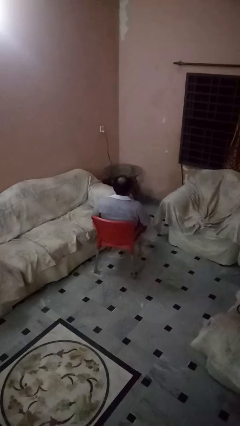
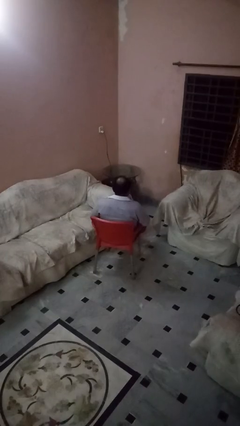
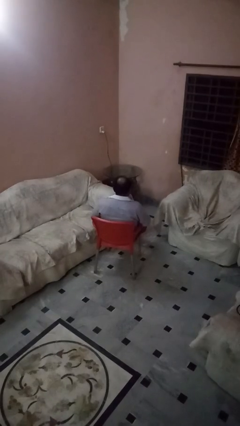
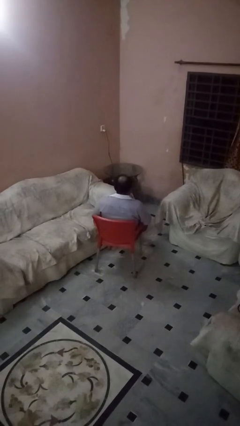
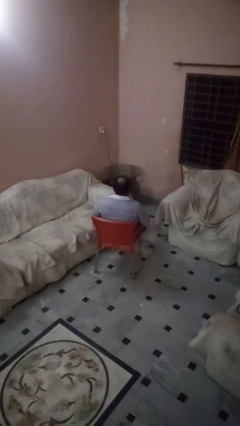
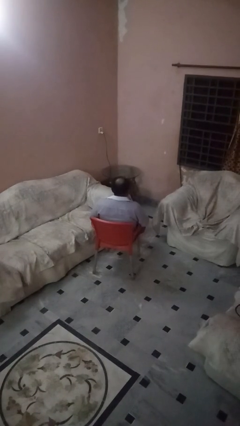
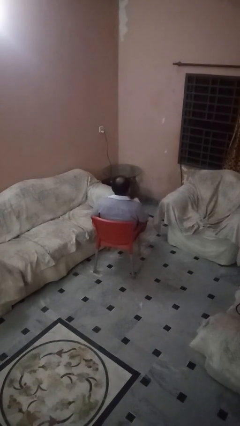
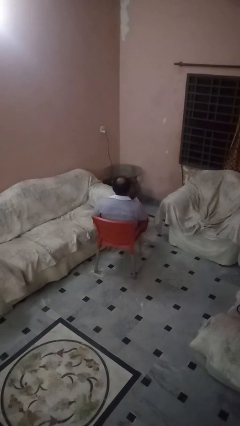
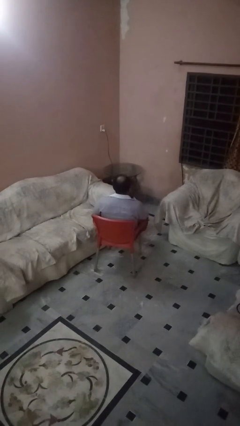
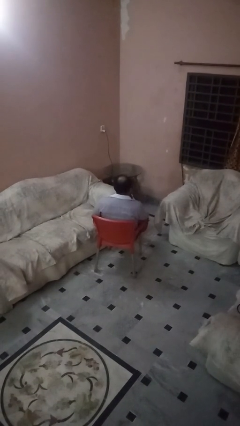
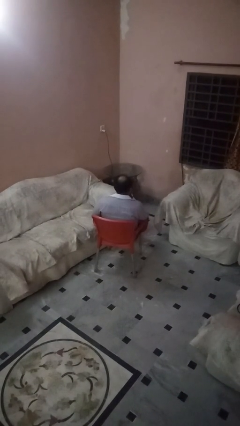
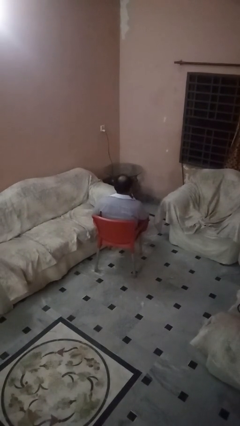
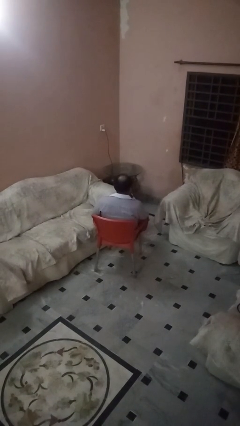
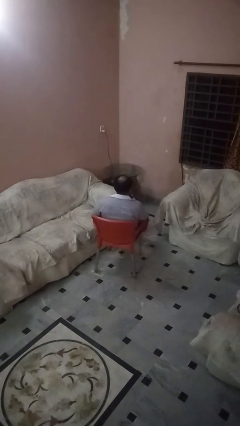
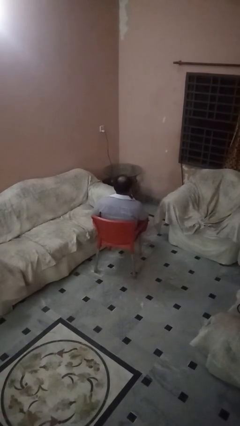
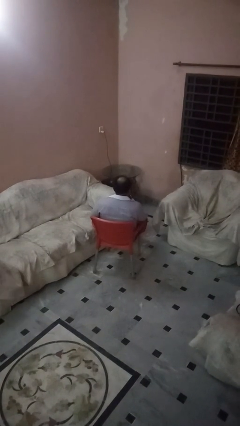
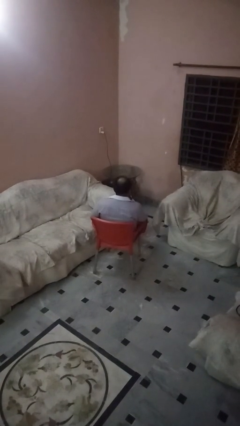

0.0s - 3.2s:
person strokes chin

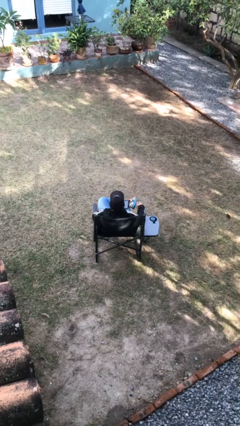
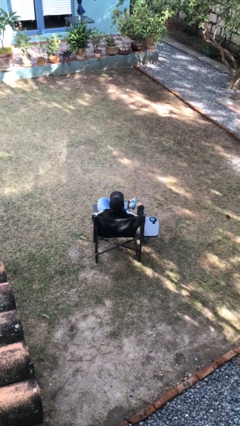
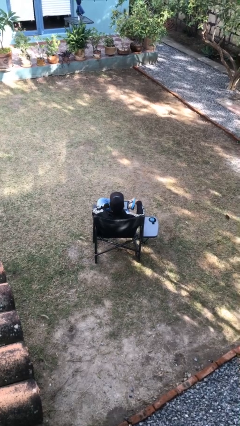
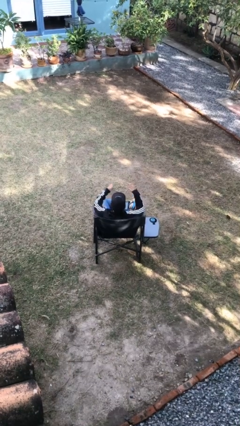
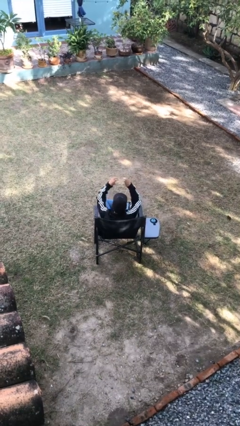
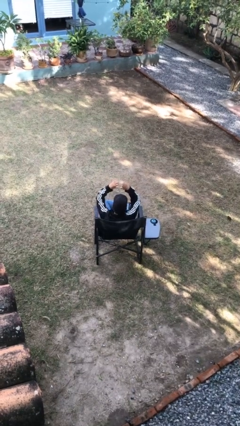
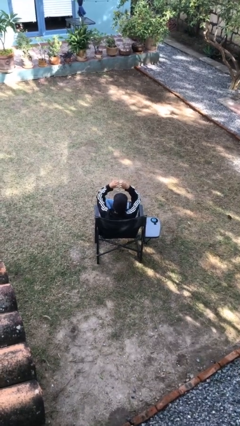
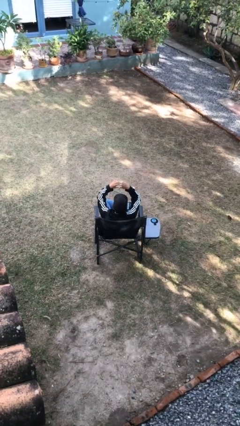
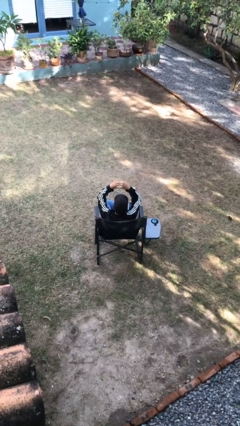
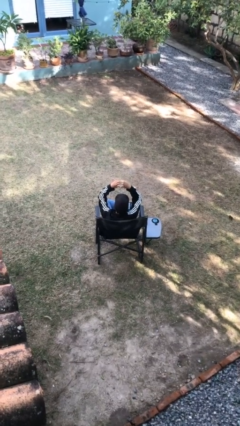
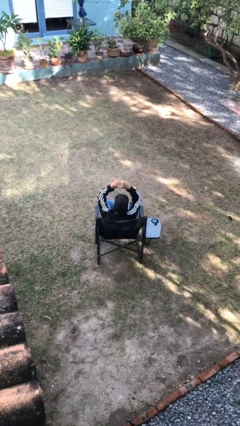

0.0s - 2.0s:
person gestures heart

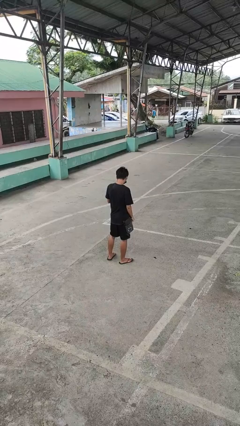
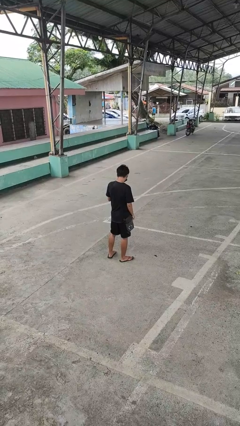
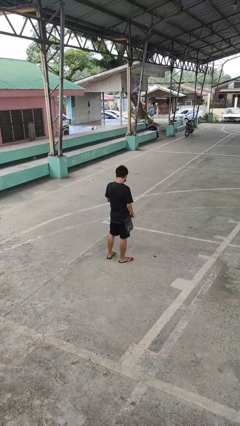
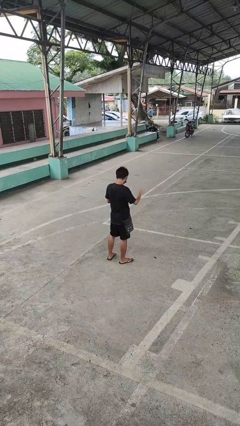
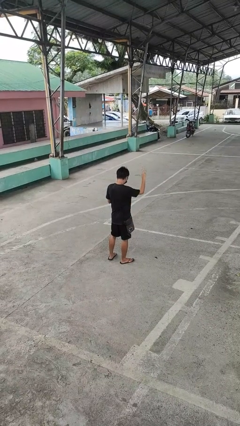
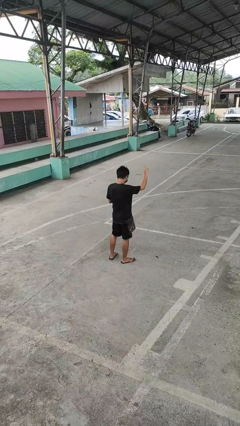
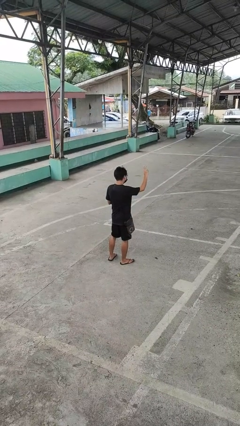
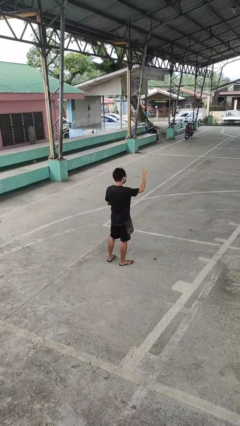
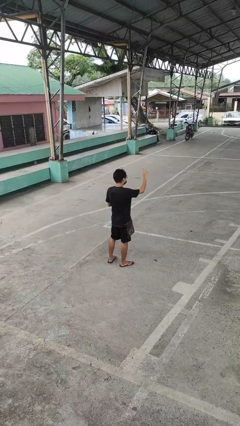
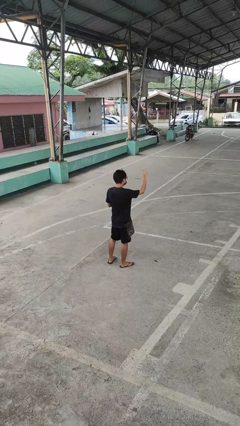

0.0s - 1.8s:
person gestures peace

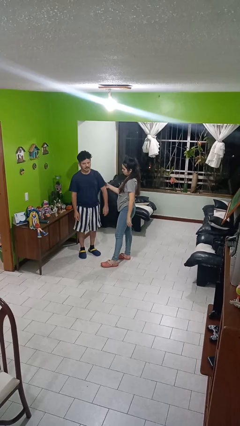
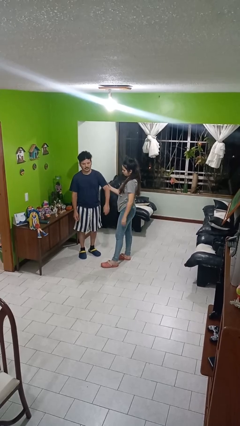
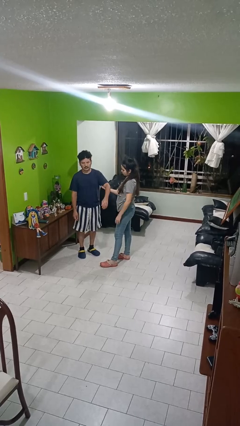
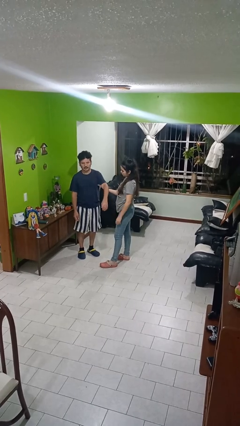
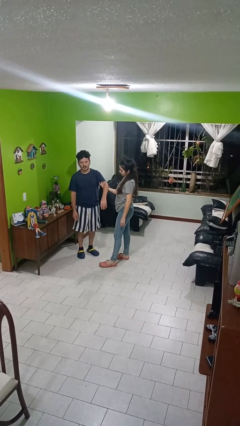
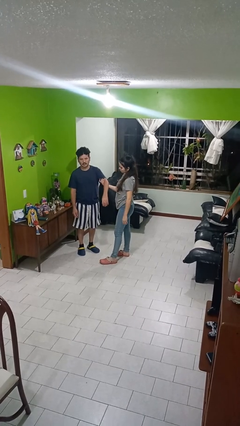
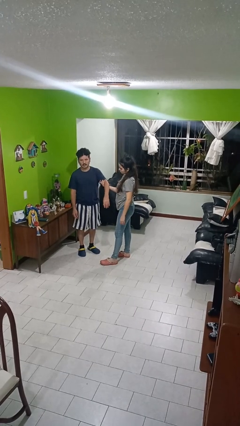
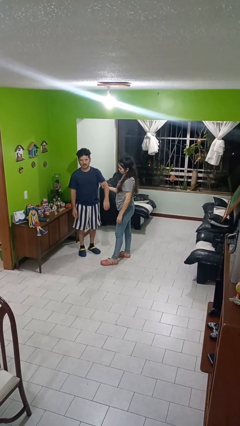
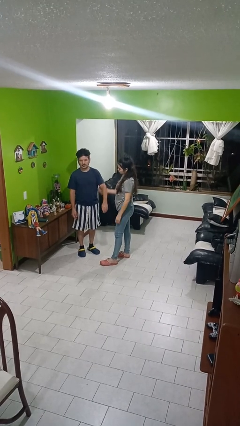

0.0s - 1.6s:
person grabs person by bicep

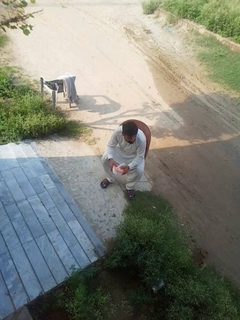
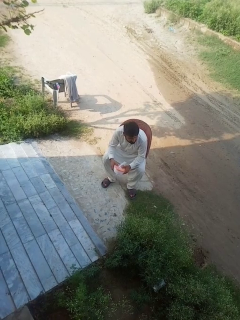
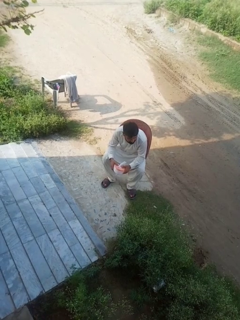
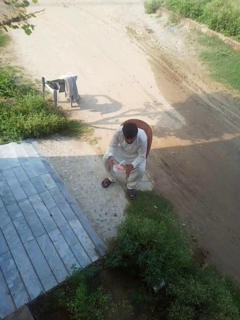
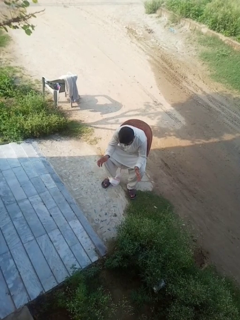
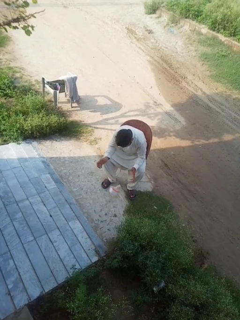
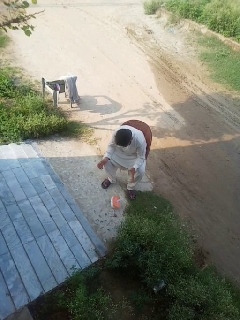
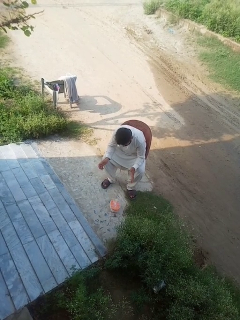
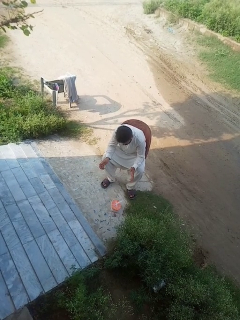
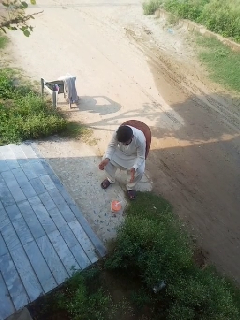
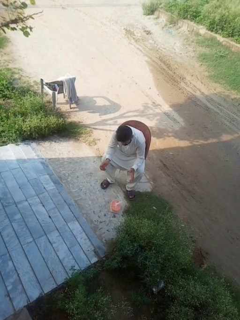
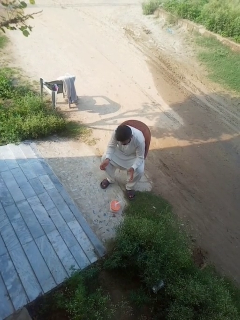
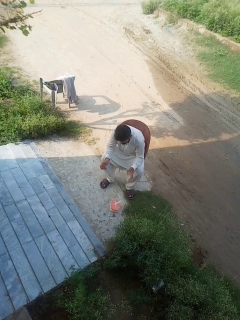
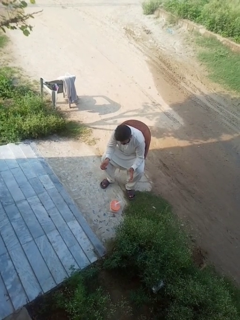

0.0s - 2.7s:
person drops object

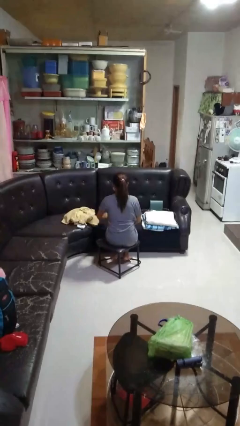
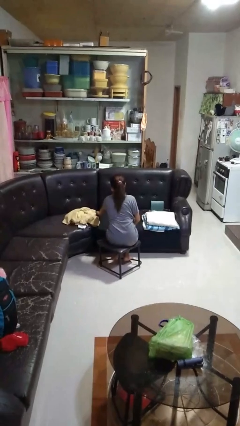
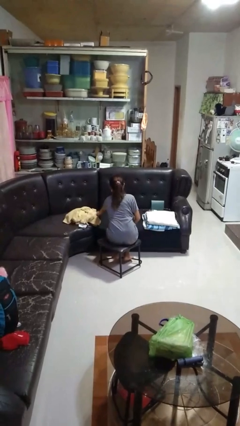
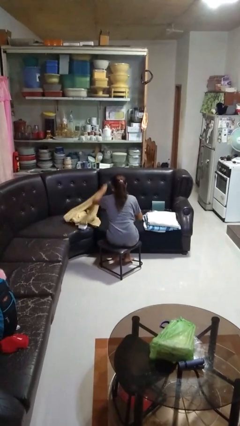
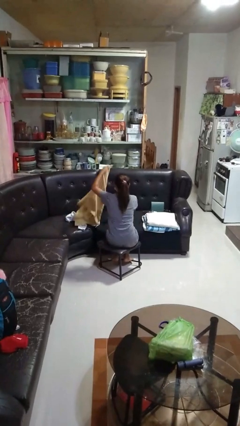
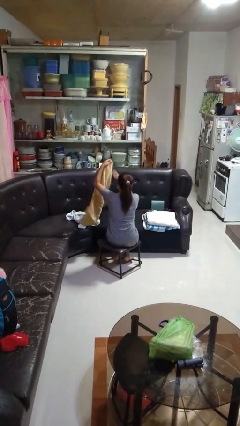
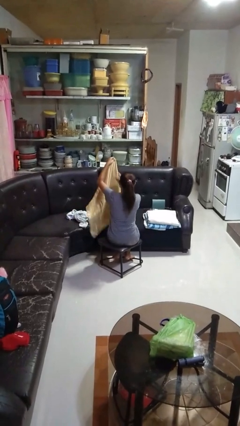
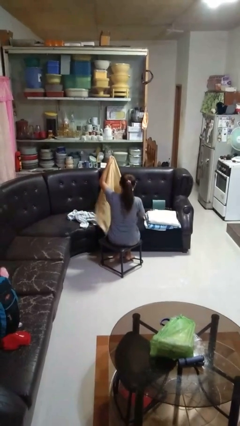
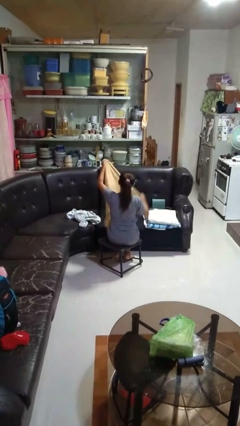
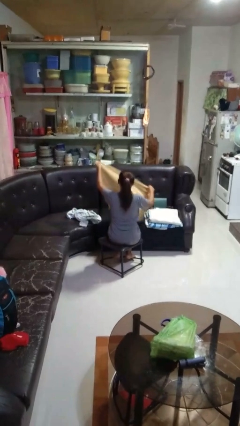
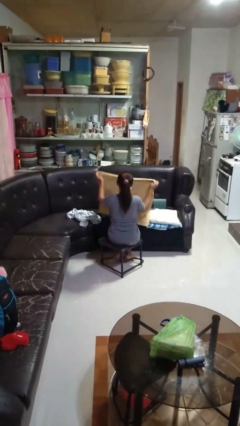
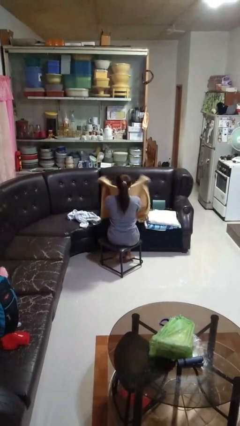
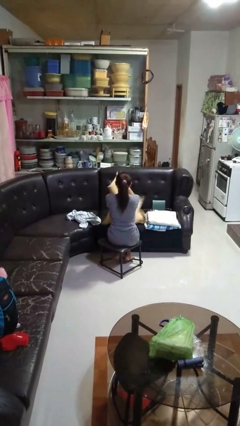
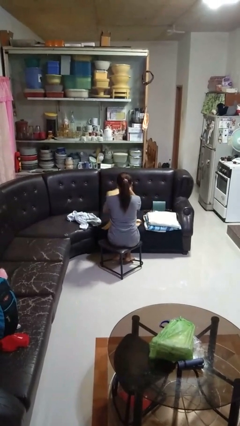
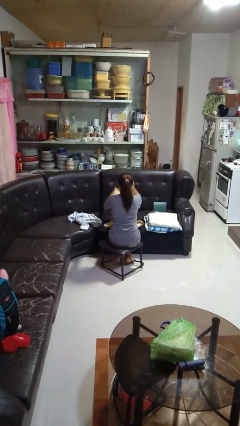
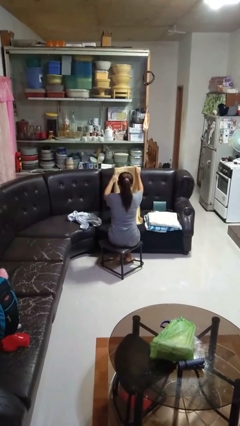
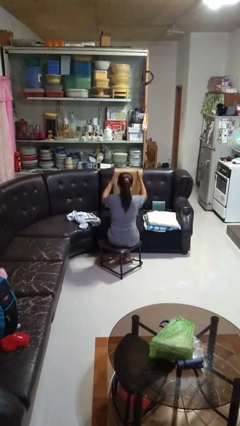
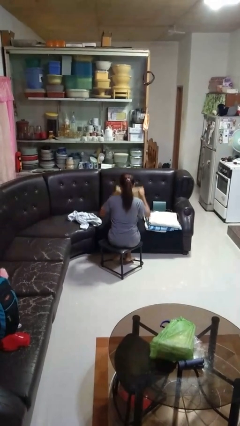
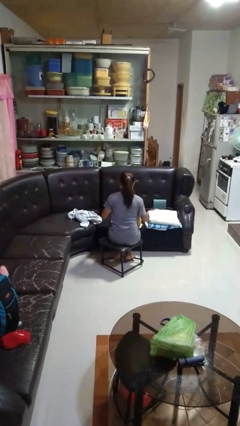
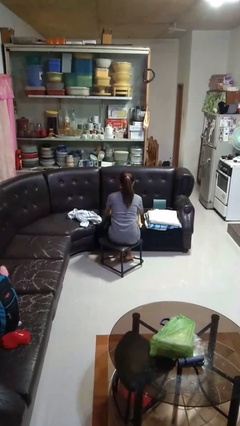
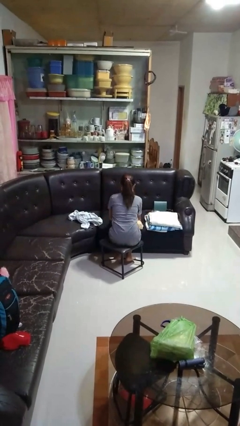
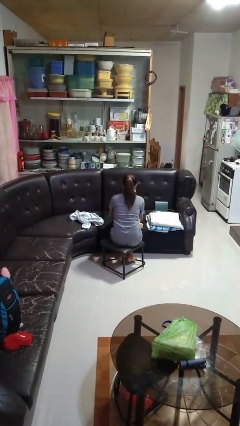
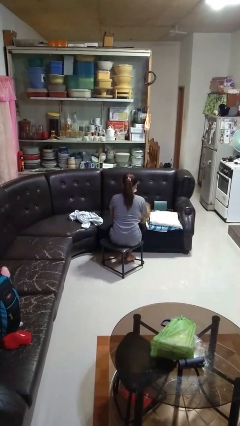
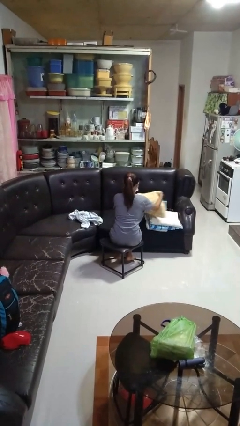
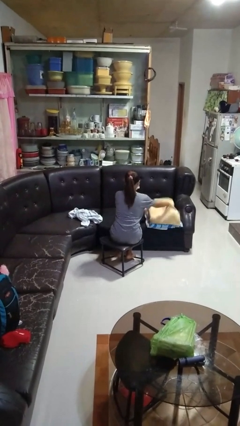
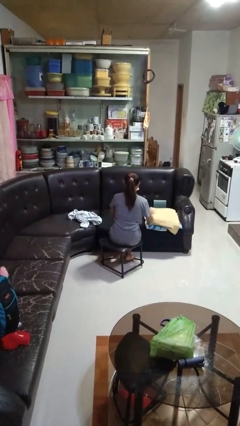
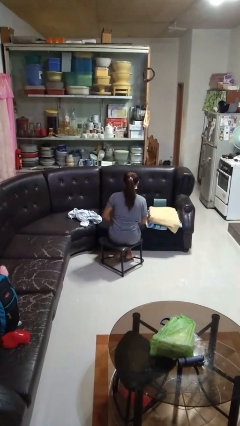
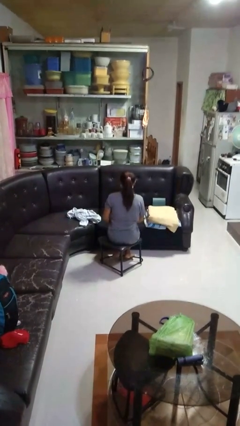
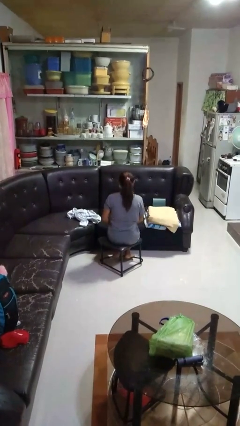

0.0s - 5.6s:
person folds towel

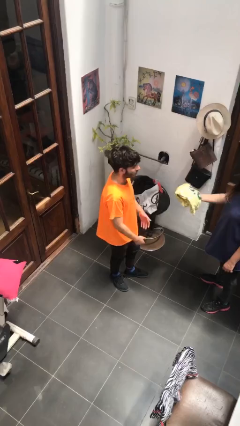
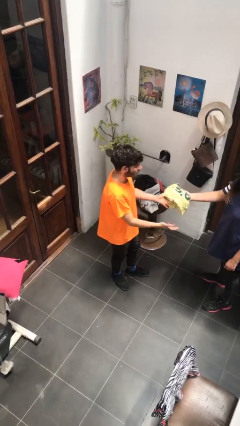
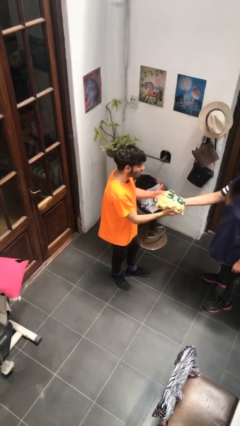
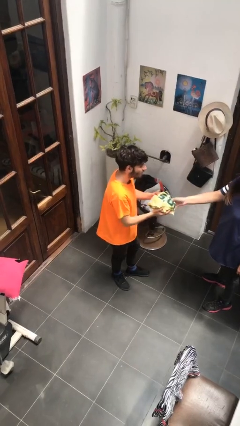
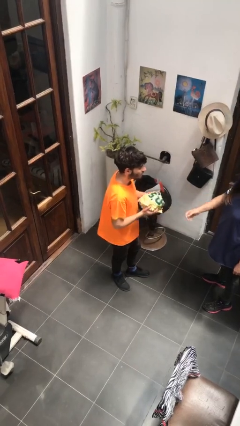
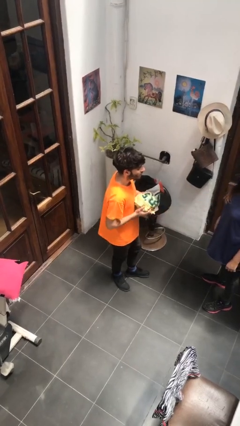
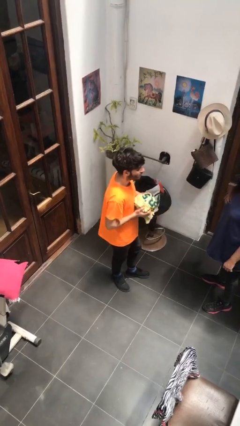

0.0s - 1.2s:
person transfers object to person
